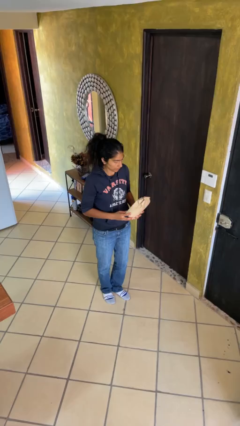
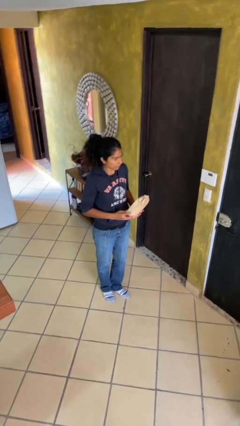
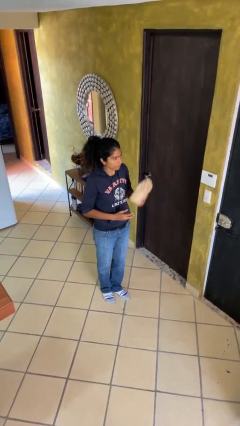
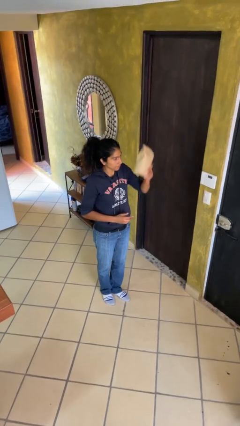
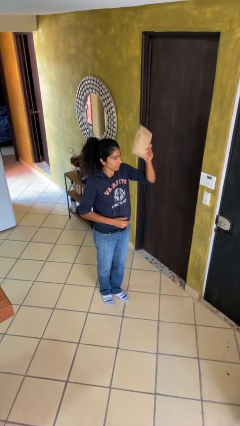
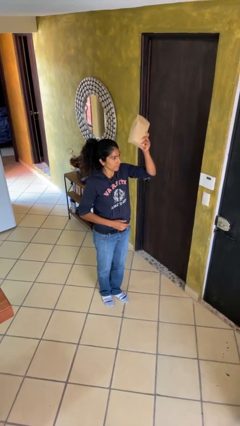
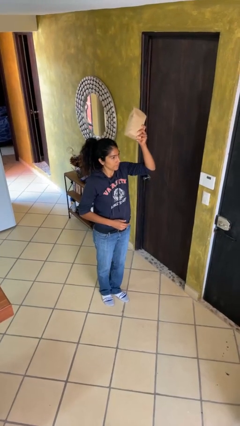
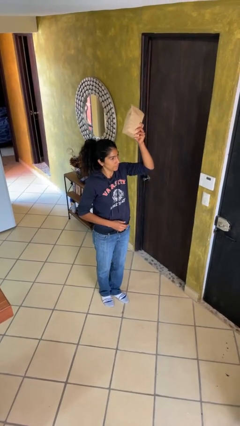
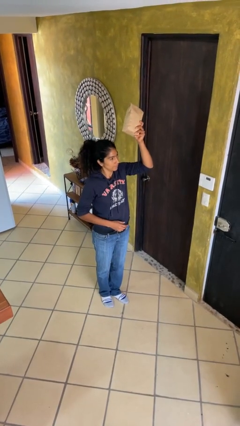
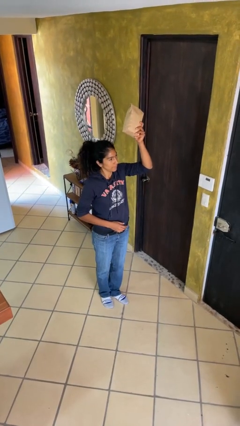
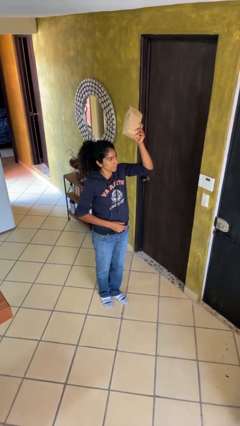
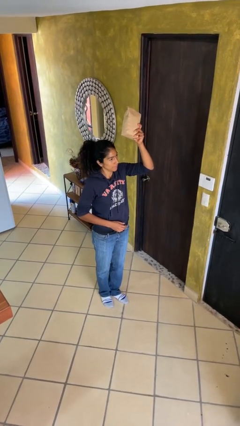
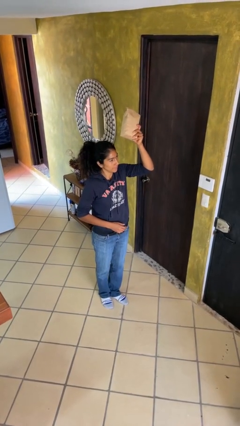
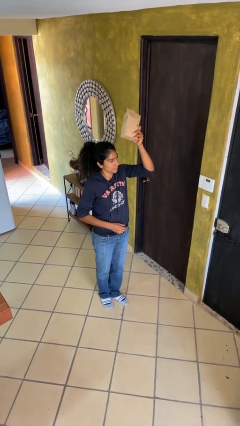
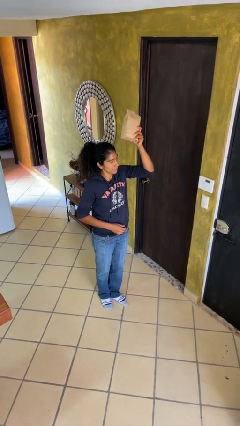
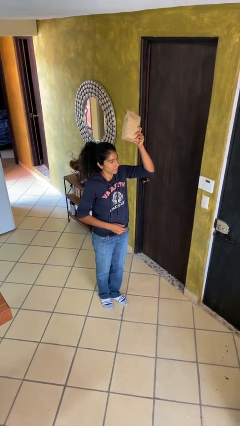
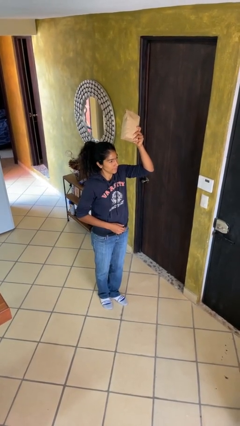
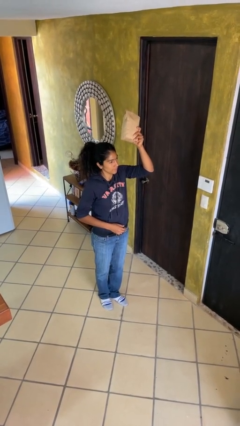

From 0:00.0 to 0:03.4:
person holds object above head

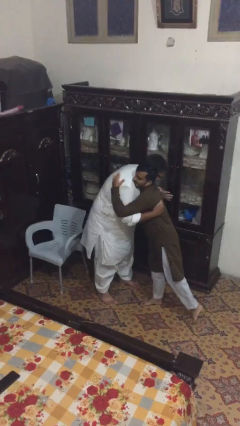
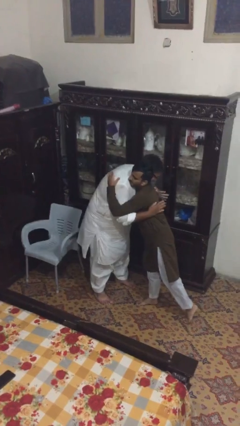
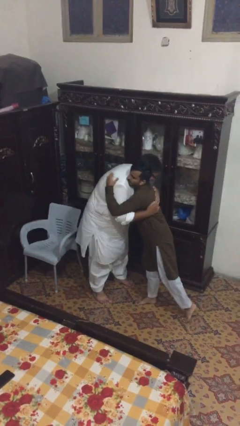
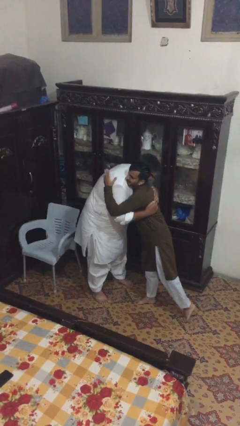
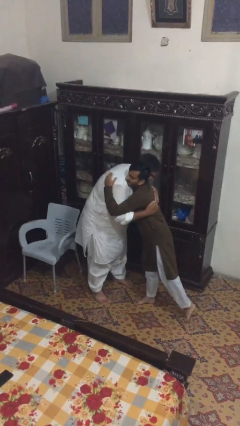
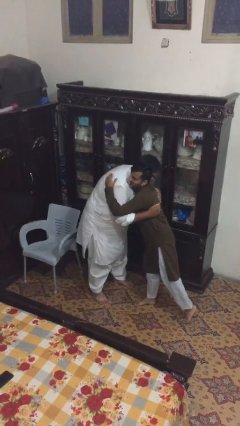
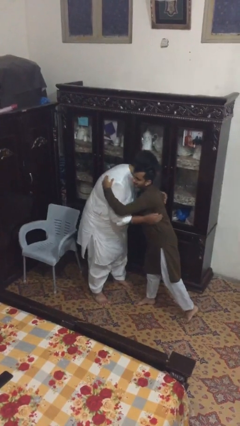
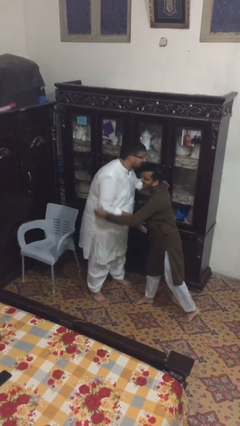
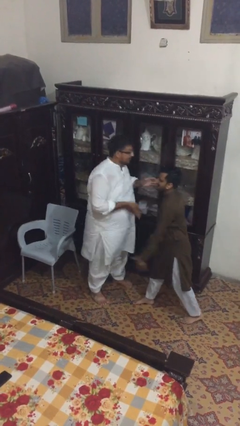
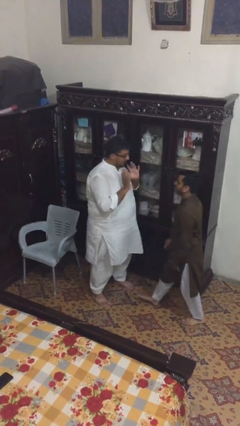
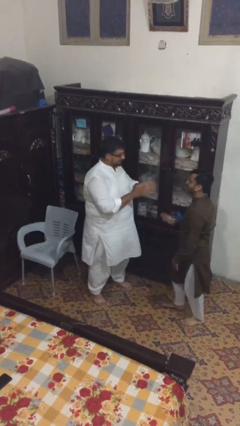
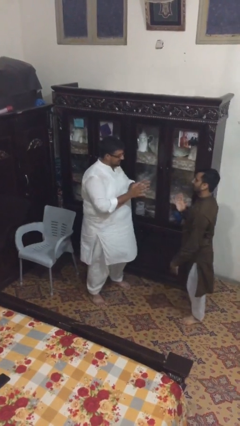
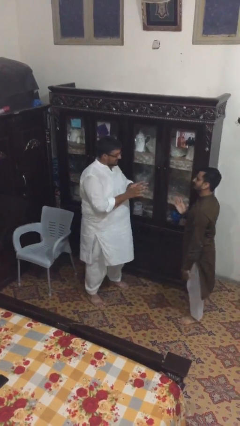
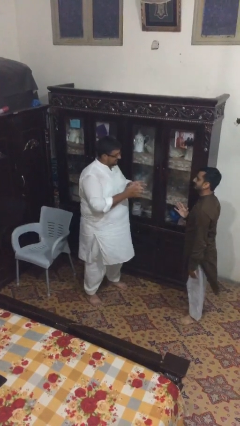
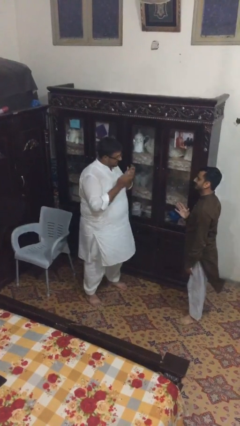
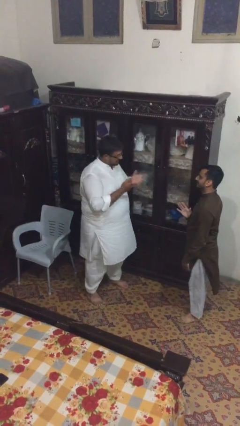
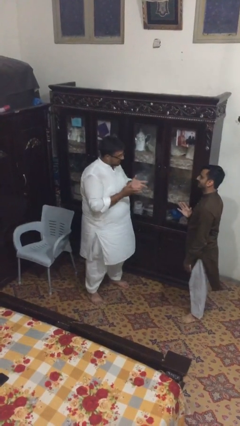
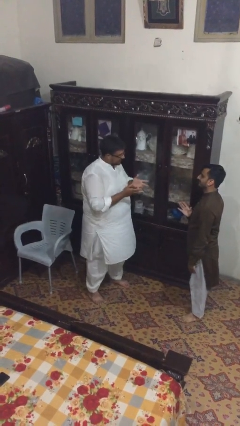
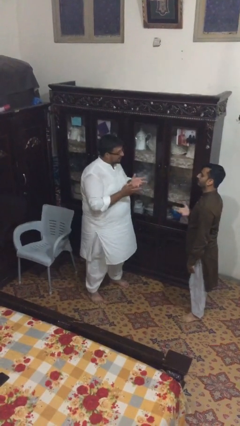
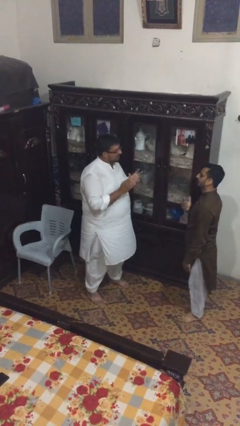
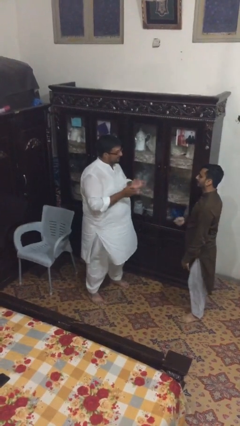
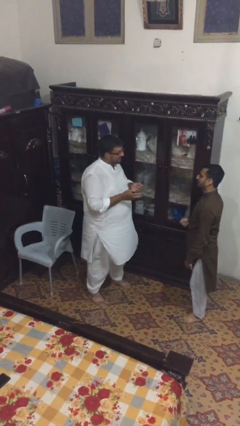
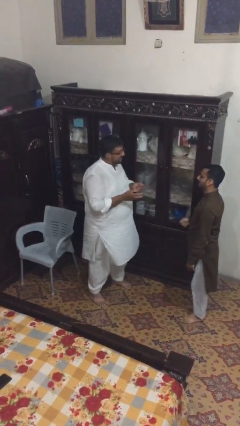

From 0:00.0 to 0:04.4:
person talks to person

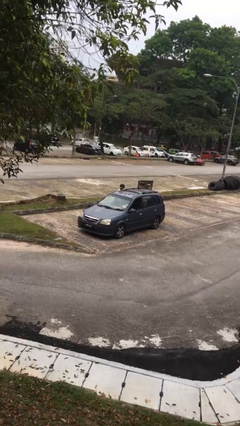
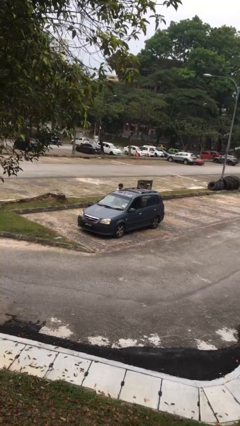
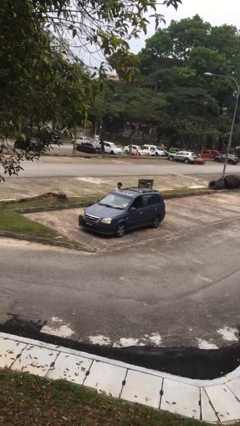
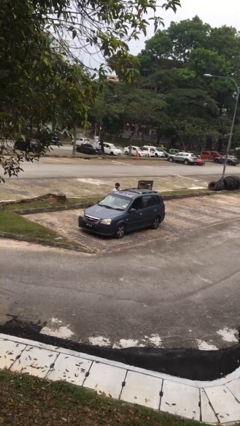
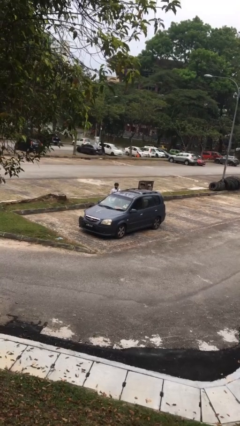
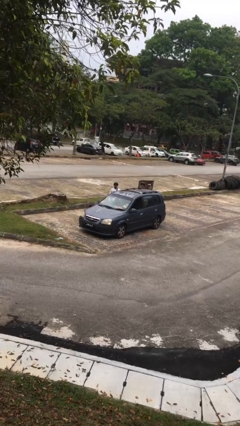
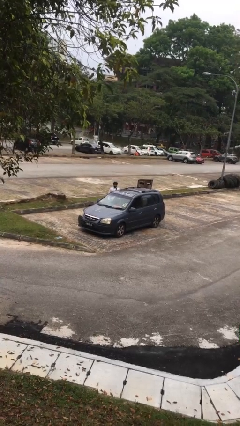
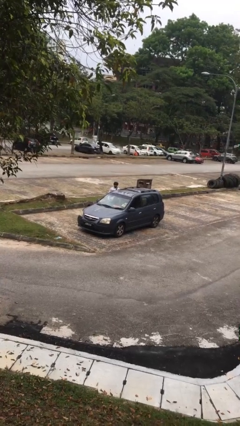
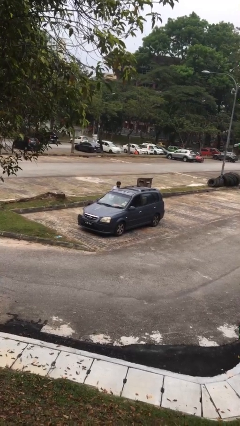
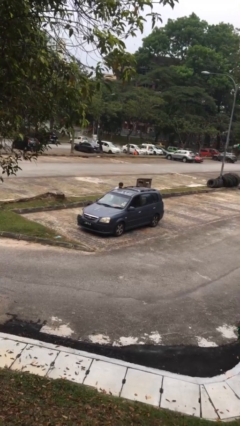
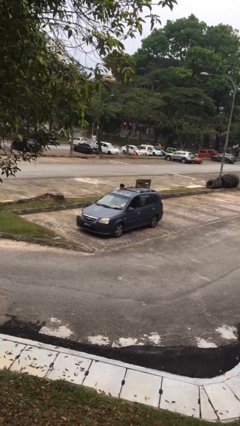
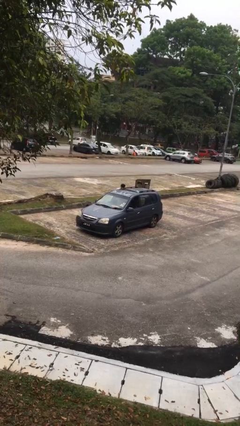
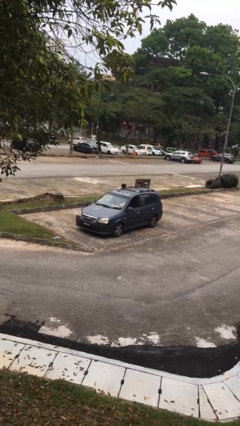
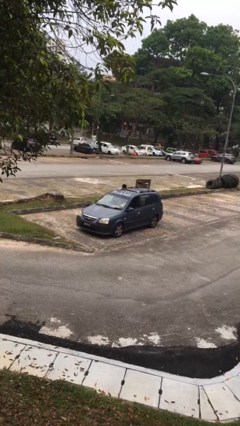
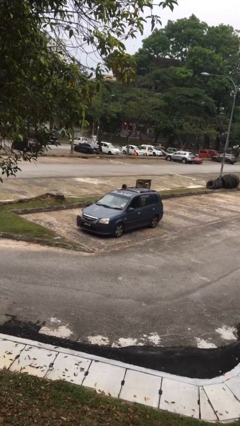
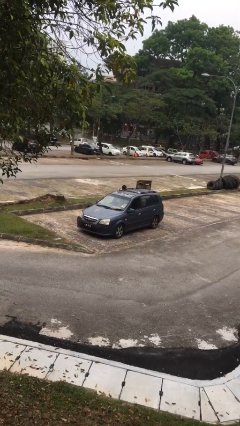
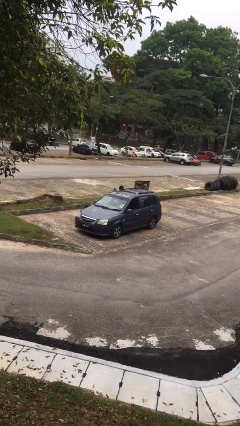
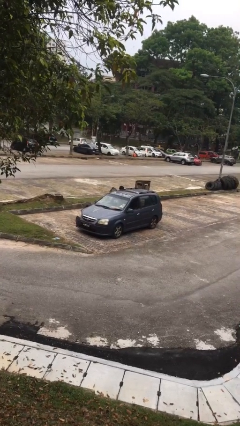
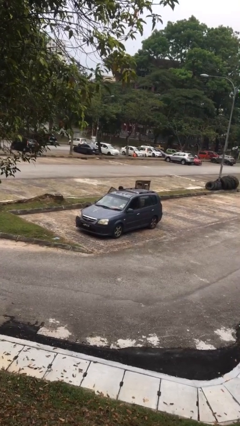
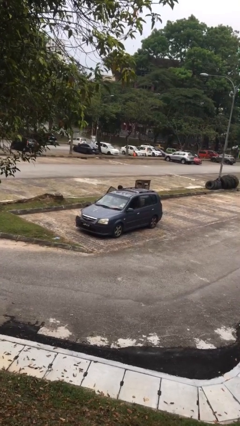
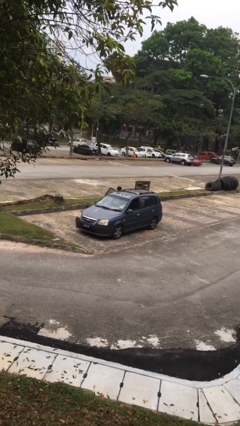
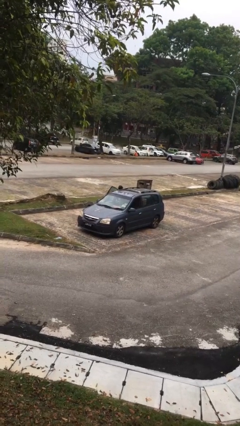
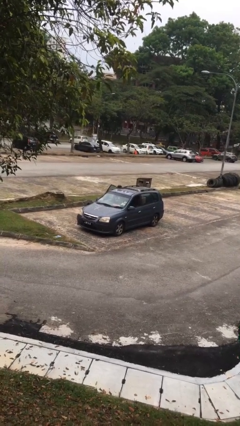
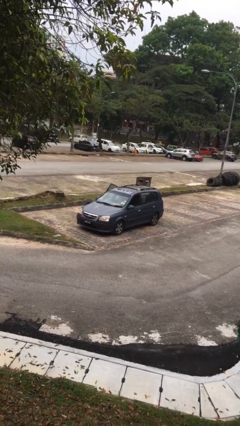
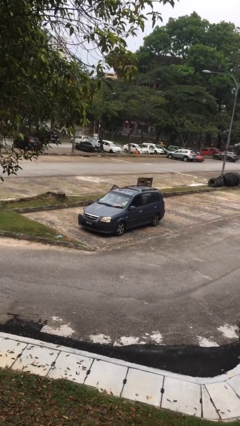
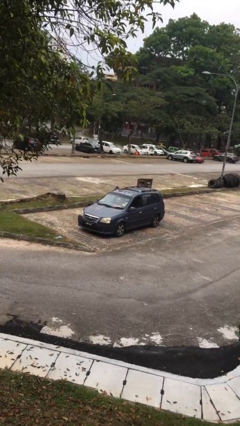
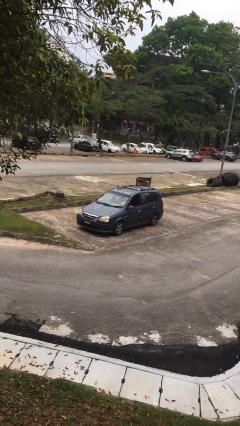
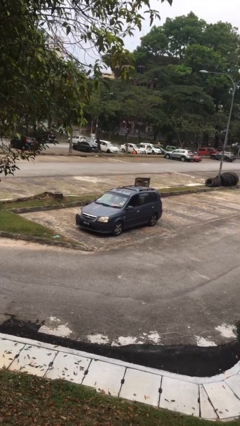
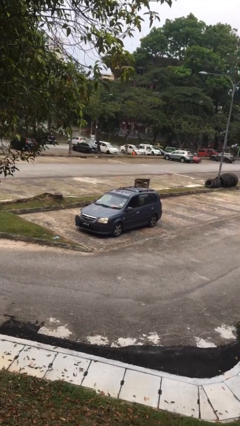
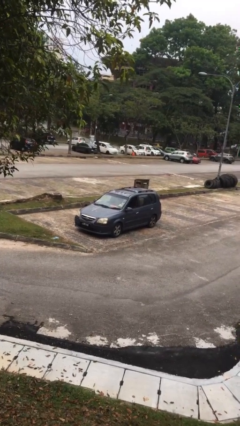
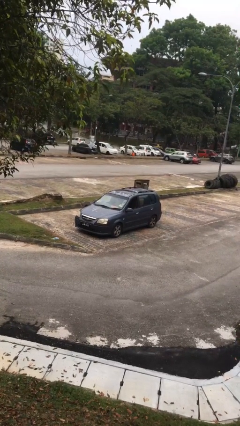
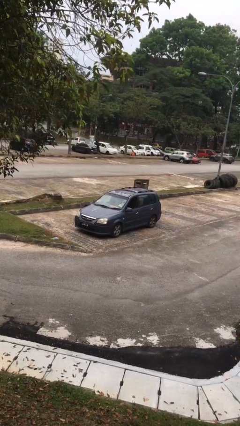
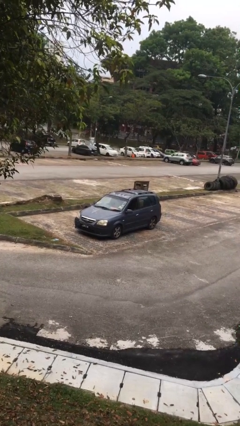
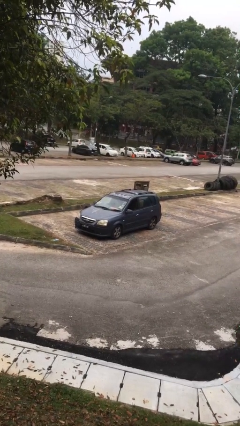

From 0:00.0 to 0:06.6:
car picks up person

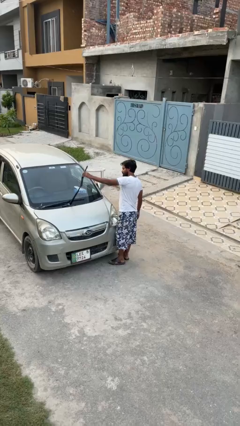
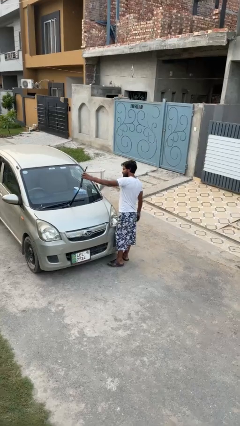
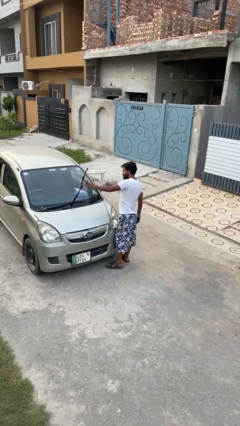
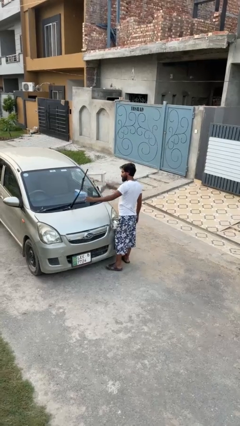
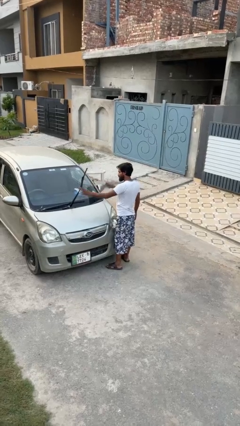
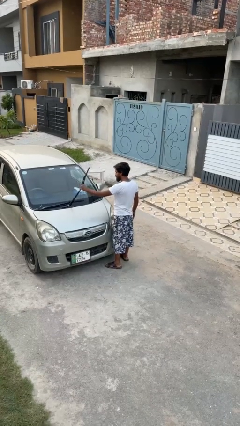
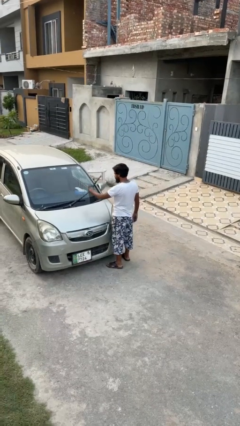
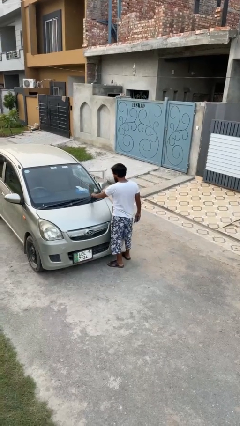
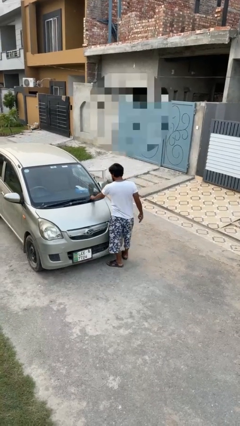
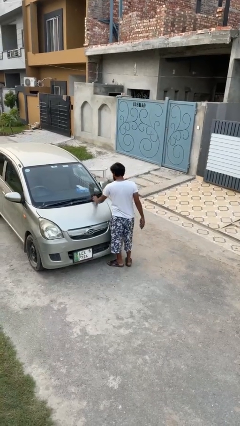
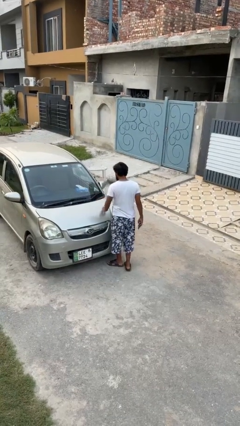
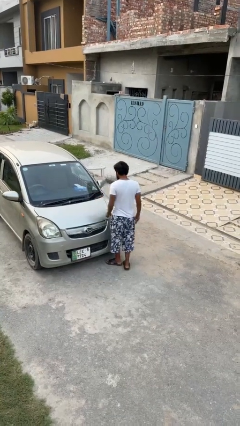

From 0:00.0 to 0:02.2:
person flips down car wipers

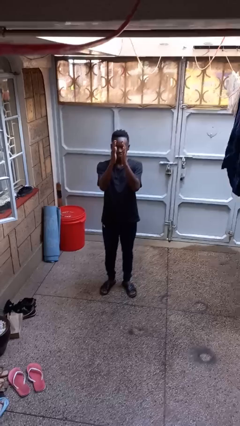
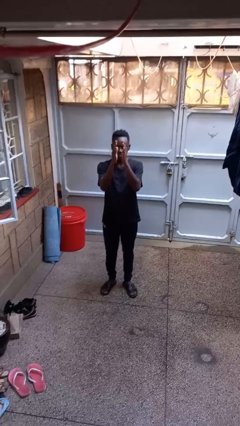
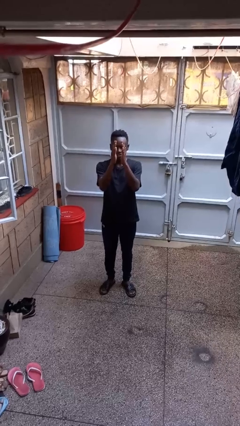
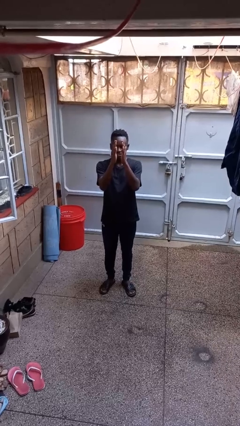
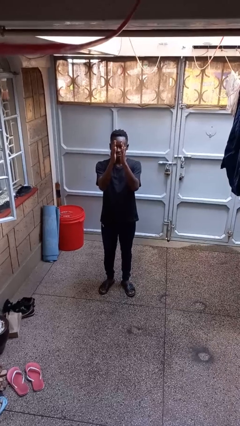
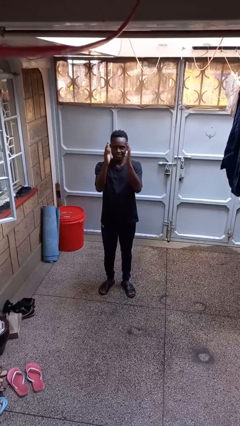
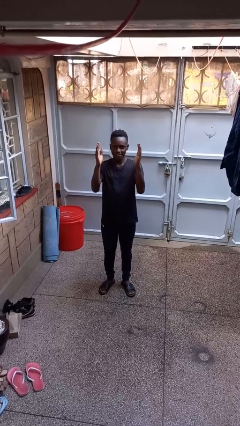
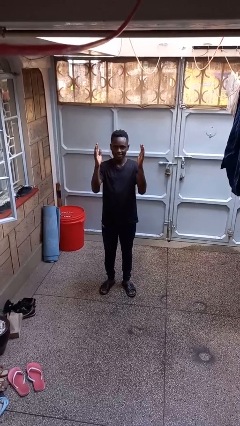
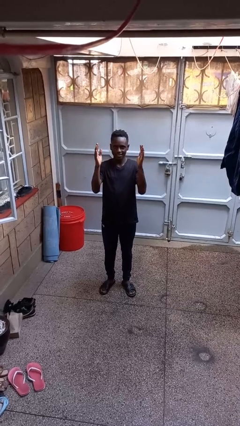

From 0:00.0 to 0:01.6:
person gestures zoom out
